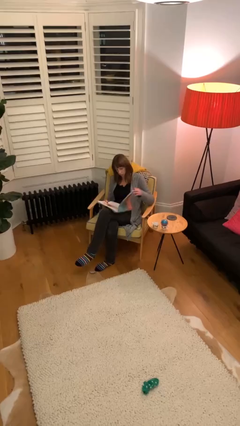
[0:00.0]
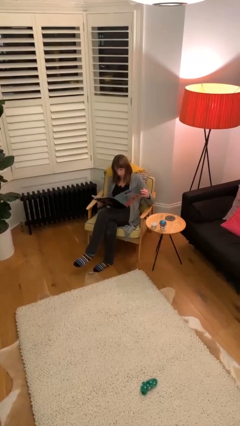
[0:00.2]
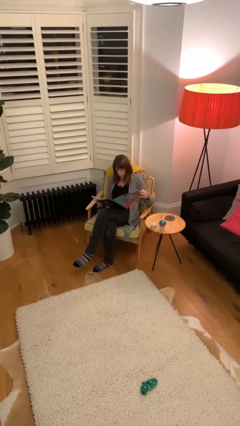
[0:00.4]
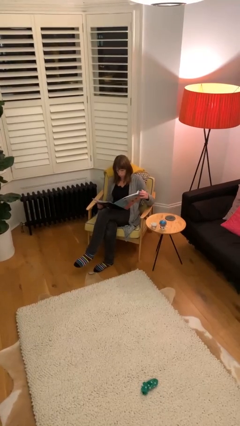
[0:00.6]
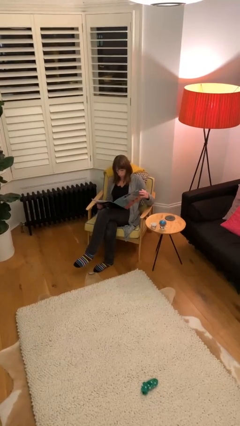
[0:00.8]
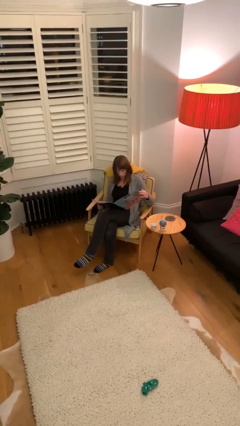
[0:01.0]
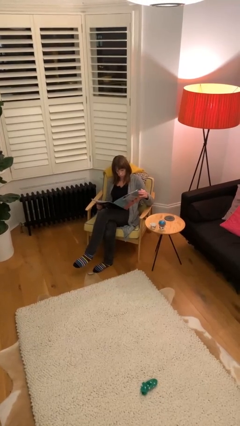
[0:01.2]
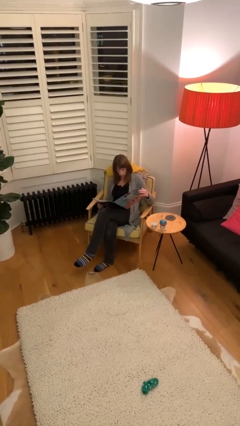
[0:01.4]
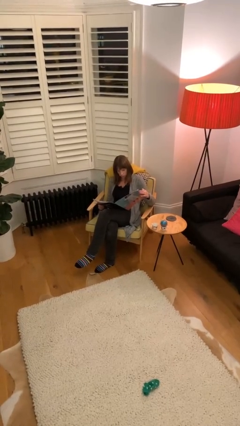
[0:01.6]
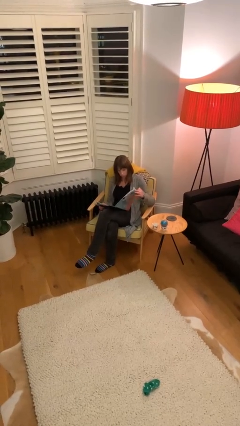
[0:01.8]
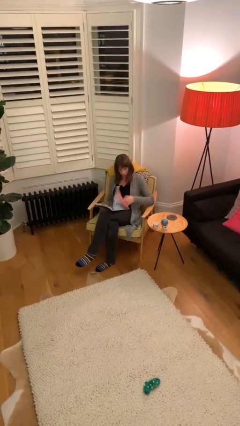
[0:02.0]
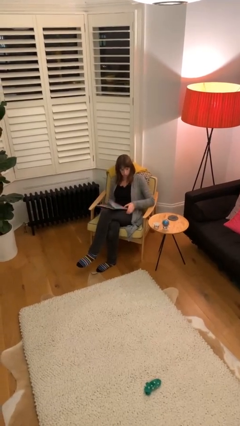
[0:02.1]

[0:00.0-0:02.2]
person reads document

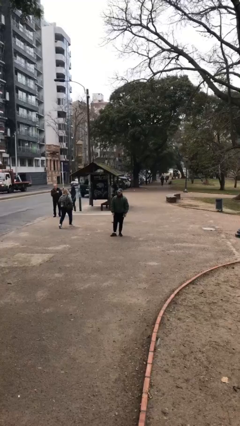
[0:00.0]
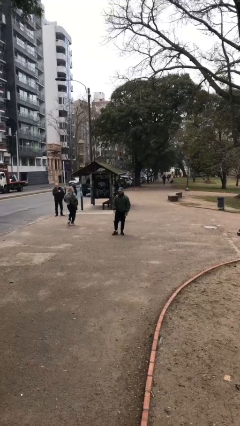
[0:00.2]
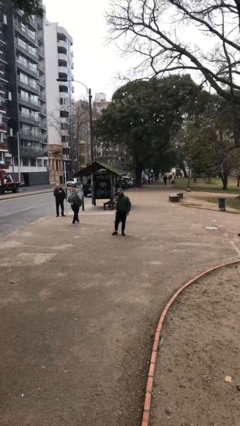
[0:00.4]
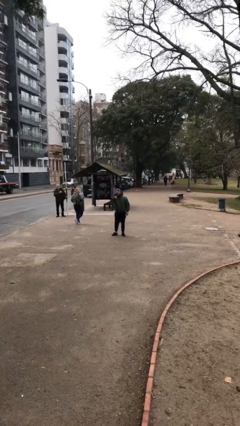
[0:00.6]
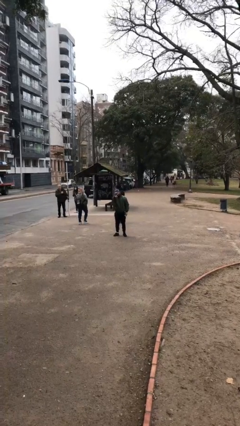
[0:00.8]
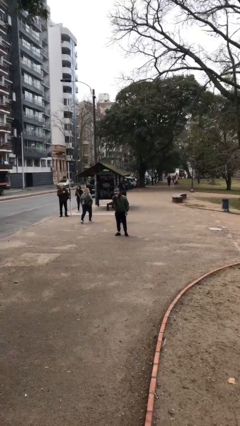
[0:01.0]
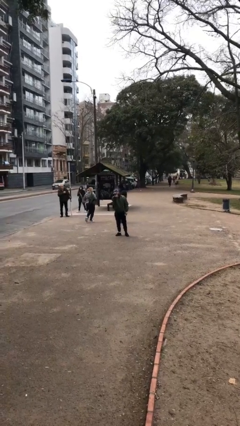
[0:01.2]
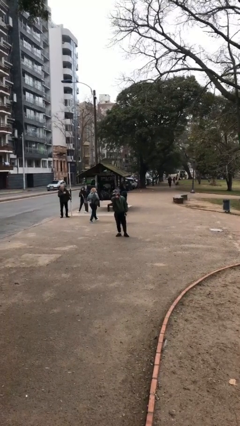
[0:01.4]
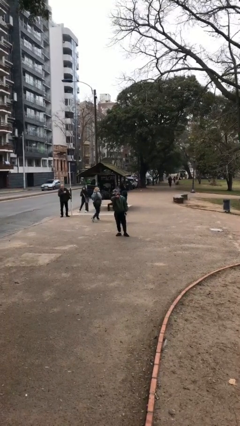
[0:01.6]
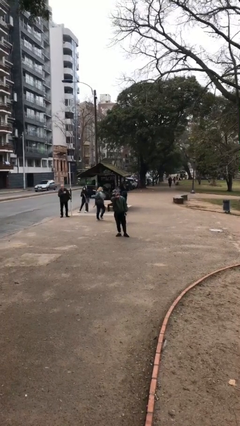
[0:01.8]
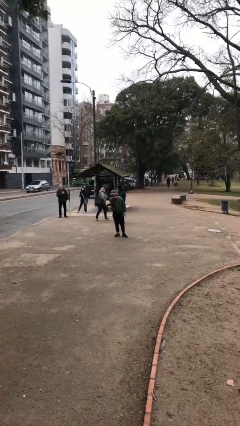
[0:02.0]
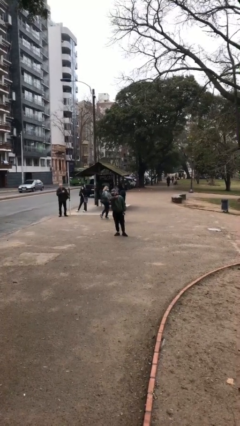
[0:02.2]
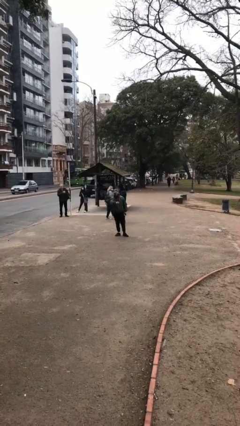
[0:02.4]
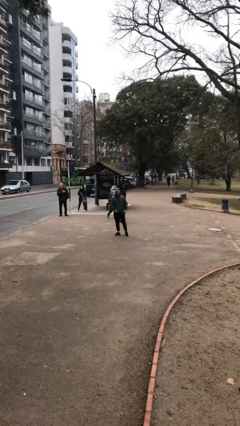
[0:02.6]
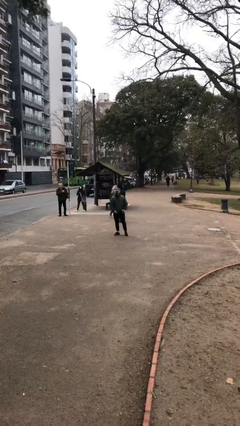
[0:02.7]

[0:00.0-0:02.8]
person points at person

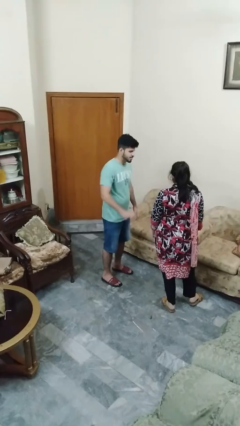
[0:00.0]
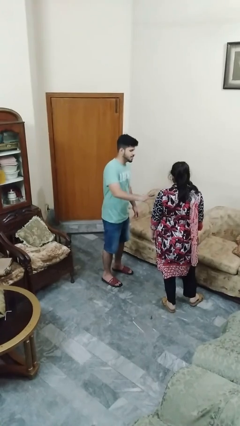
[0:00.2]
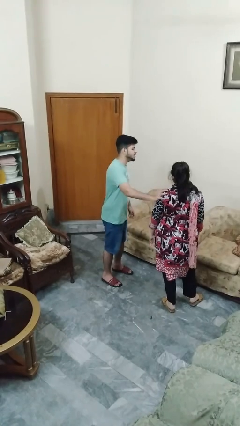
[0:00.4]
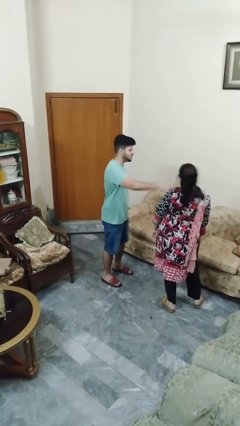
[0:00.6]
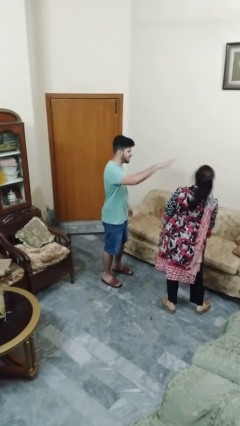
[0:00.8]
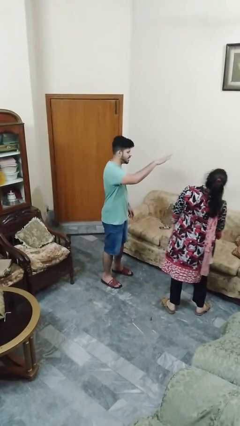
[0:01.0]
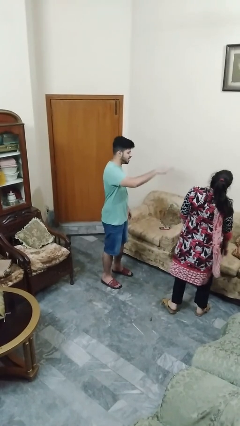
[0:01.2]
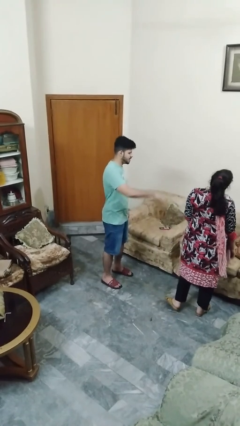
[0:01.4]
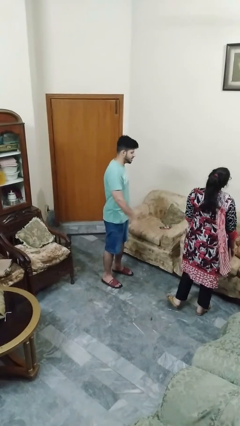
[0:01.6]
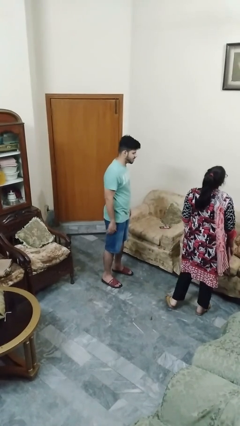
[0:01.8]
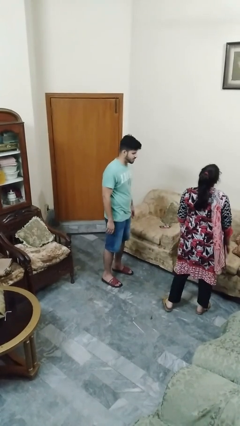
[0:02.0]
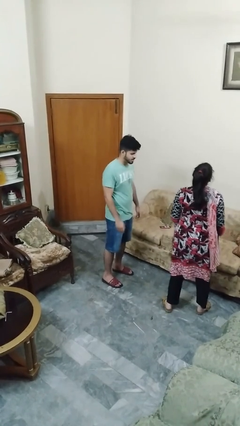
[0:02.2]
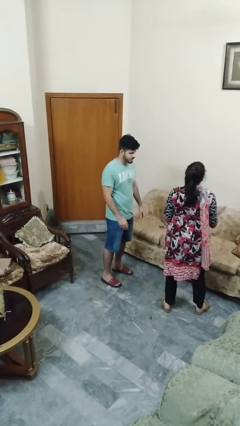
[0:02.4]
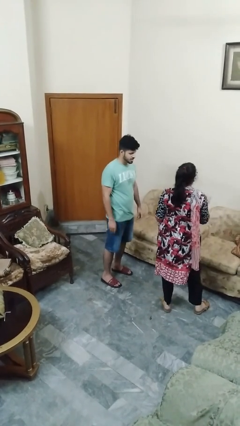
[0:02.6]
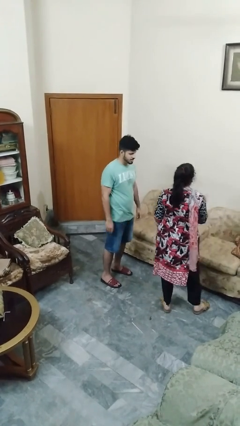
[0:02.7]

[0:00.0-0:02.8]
person shoves person

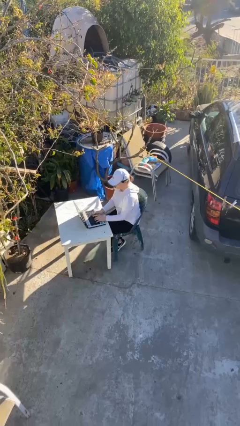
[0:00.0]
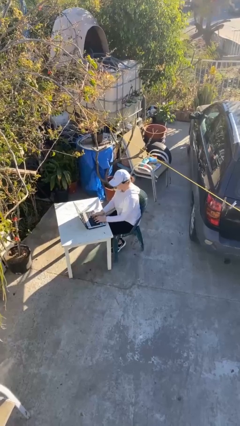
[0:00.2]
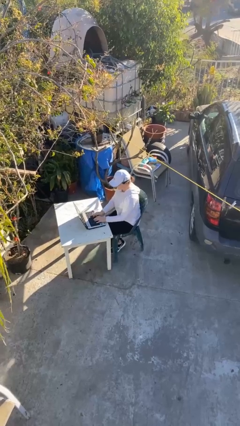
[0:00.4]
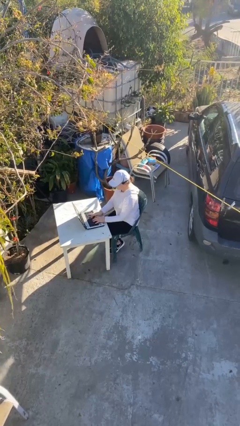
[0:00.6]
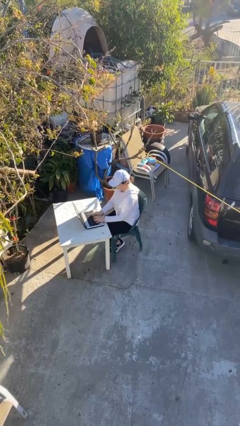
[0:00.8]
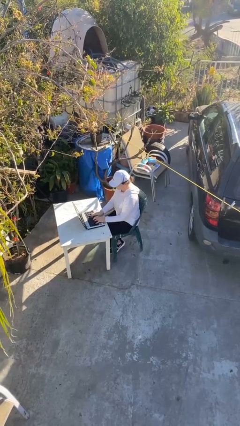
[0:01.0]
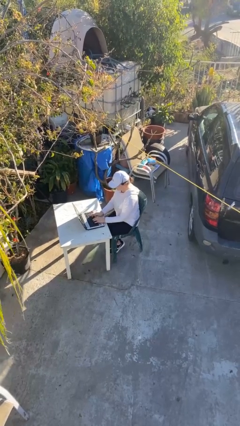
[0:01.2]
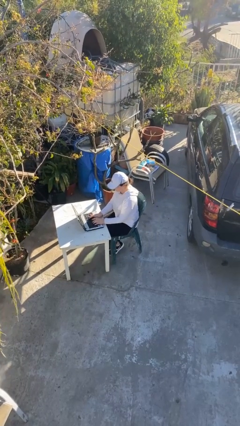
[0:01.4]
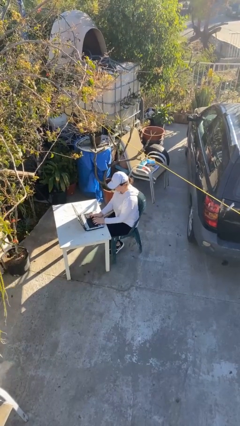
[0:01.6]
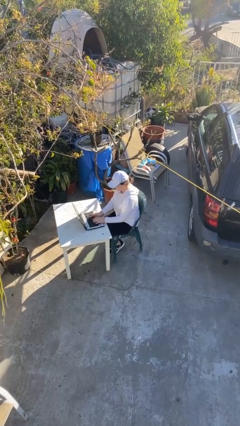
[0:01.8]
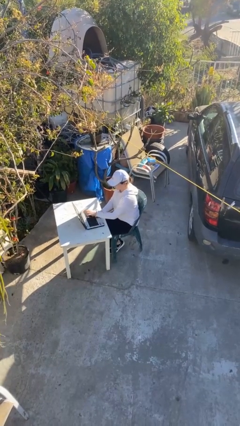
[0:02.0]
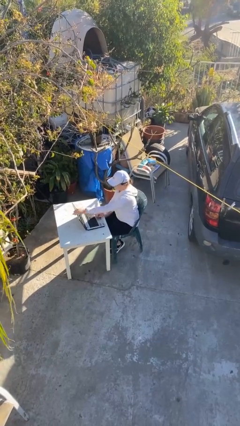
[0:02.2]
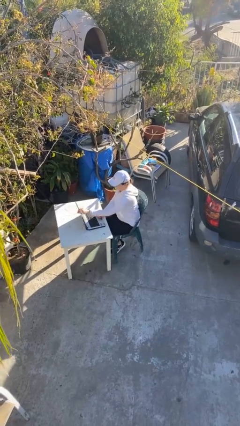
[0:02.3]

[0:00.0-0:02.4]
person interacts with laptop

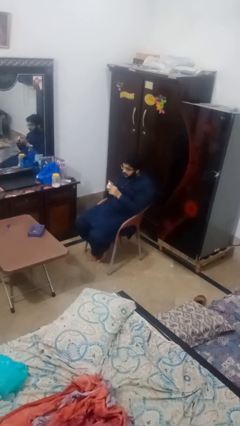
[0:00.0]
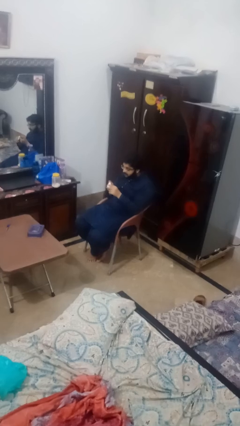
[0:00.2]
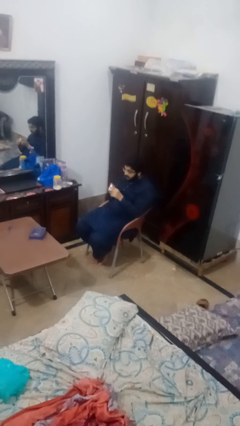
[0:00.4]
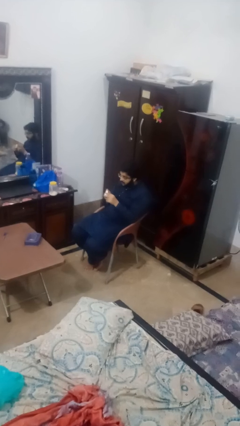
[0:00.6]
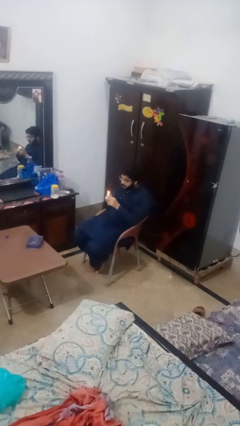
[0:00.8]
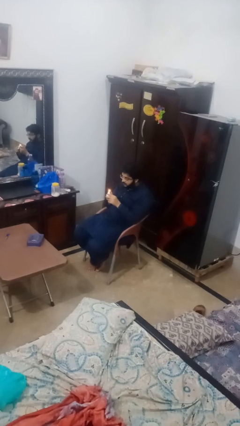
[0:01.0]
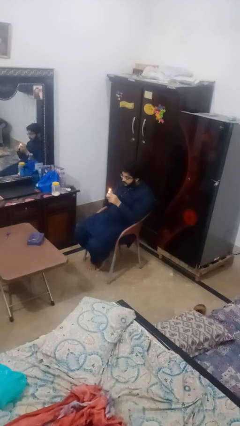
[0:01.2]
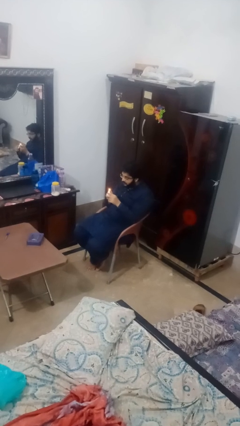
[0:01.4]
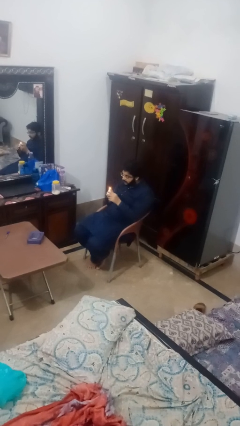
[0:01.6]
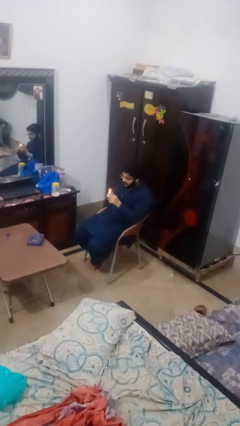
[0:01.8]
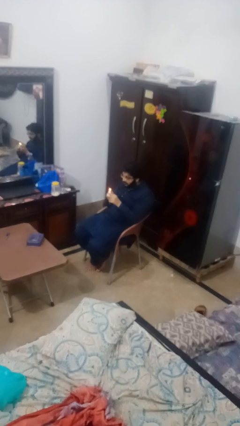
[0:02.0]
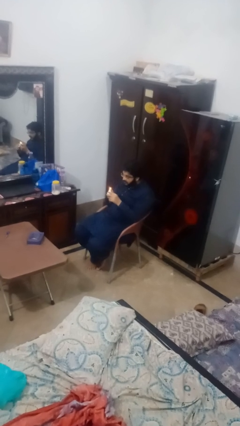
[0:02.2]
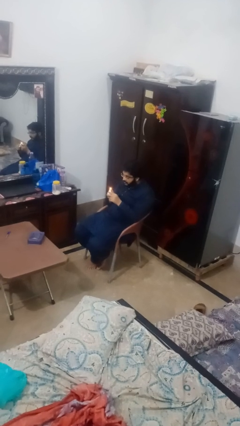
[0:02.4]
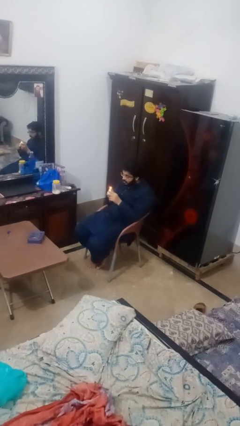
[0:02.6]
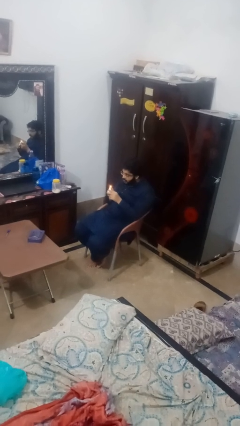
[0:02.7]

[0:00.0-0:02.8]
person lights candle

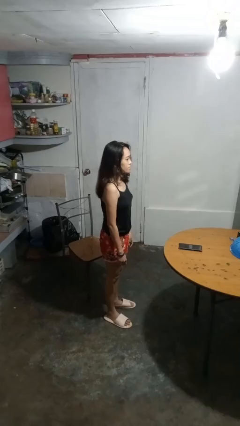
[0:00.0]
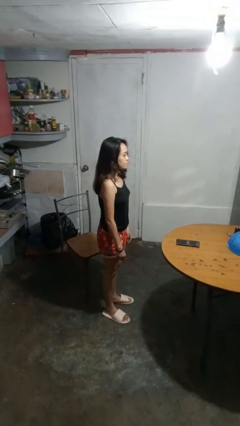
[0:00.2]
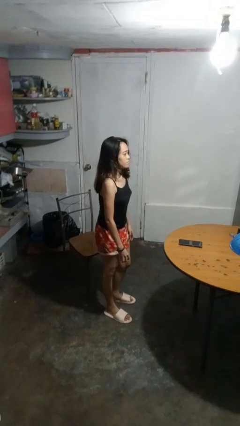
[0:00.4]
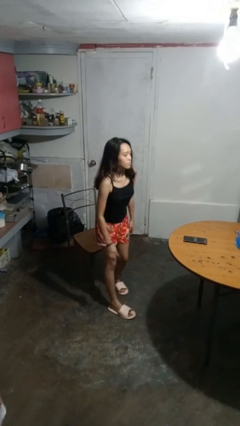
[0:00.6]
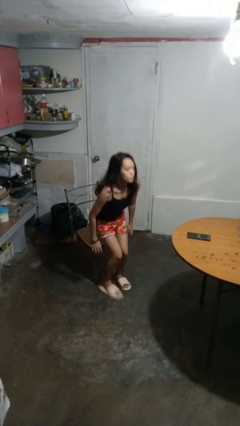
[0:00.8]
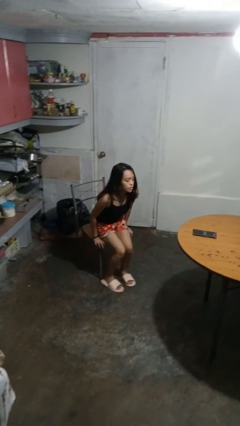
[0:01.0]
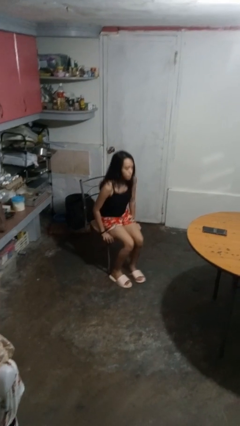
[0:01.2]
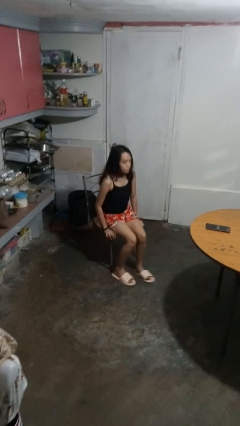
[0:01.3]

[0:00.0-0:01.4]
person sits down

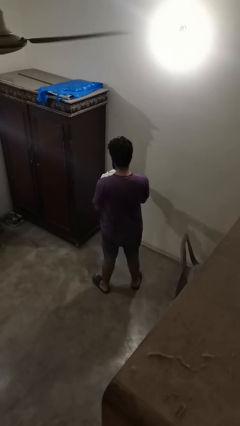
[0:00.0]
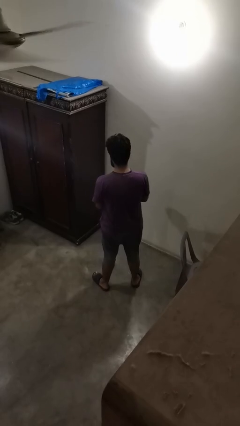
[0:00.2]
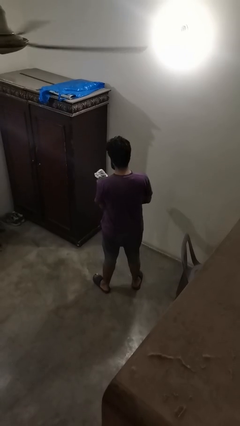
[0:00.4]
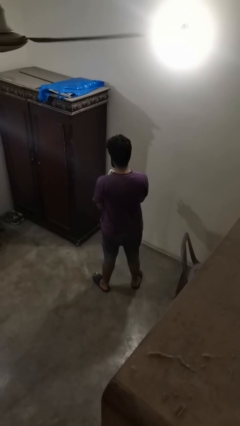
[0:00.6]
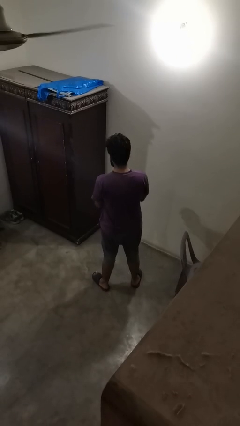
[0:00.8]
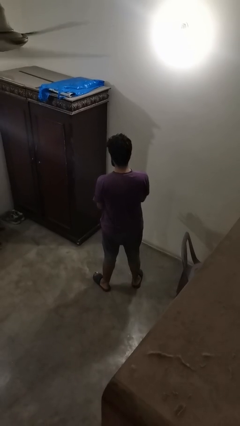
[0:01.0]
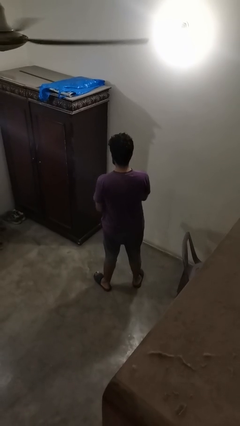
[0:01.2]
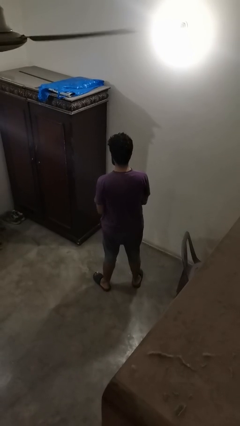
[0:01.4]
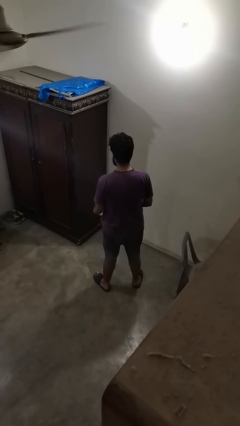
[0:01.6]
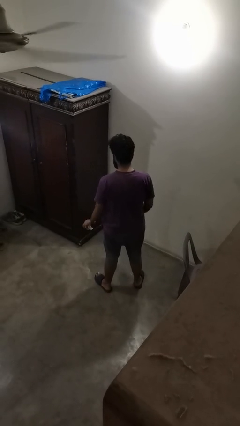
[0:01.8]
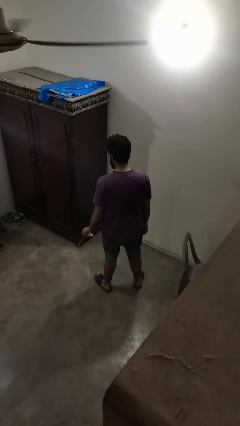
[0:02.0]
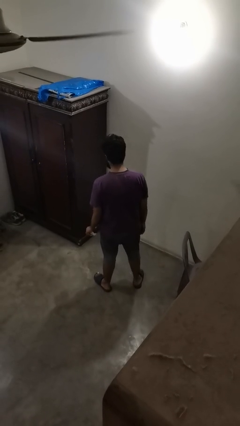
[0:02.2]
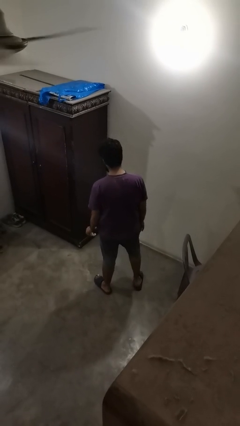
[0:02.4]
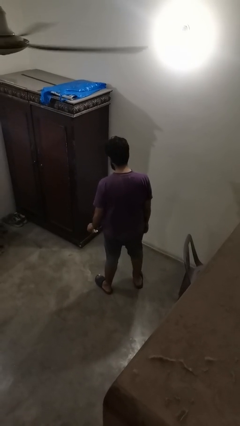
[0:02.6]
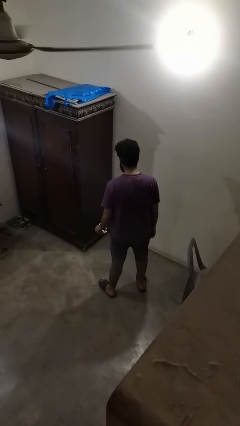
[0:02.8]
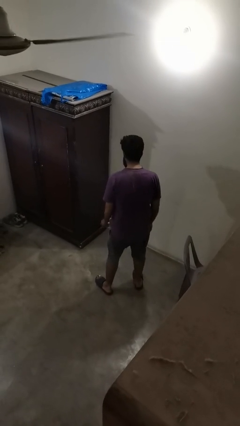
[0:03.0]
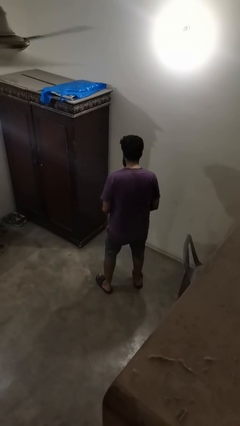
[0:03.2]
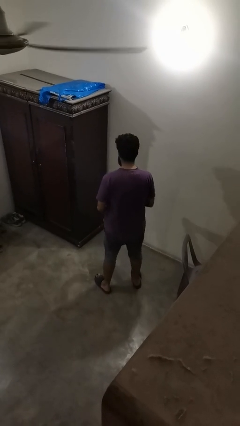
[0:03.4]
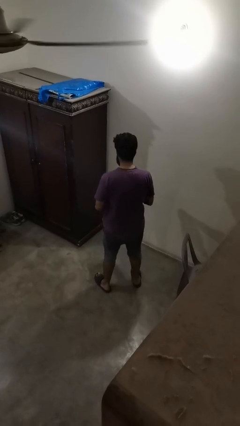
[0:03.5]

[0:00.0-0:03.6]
person crumples paper
